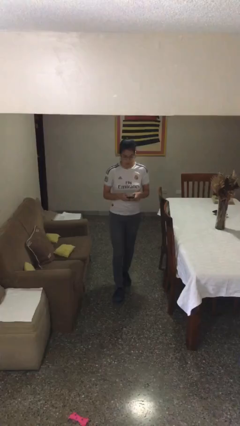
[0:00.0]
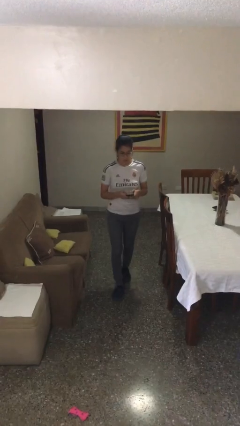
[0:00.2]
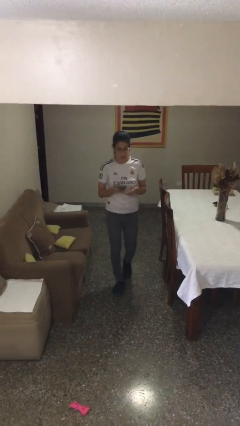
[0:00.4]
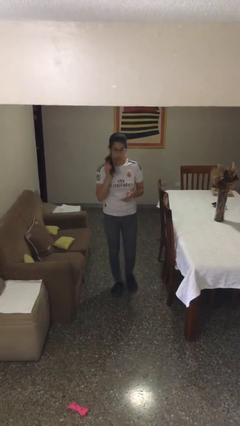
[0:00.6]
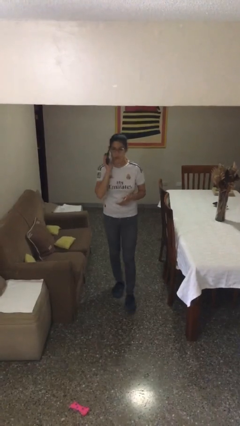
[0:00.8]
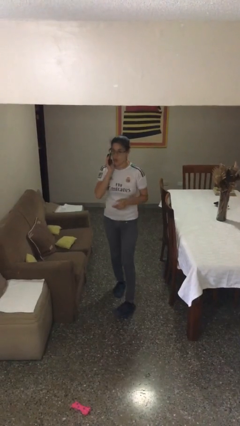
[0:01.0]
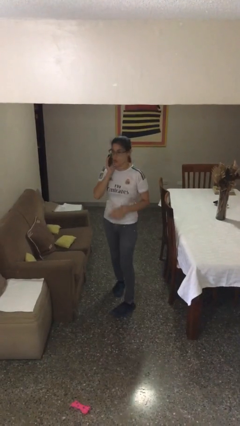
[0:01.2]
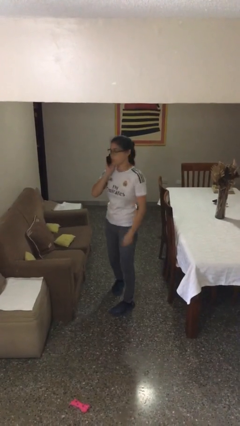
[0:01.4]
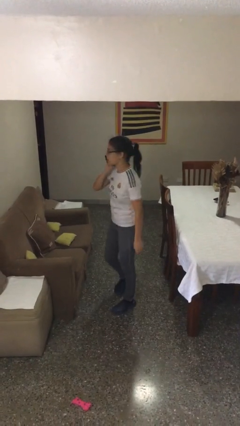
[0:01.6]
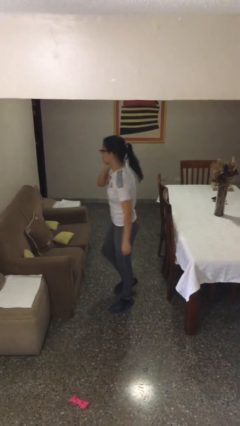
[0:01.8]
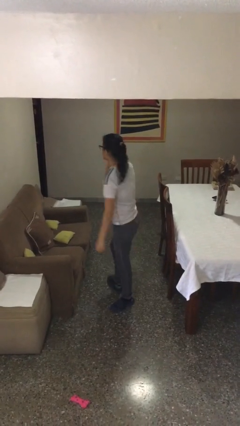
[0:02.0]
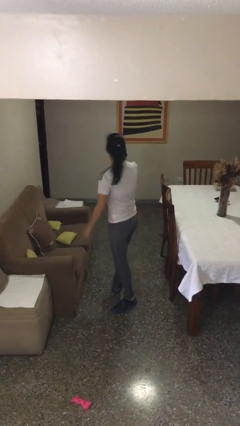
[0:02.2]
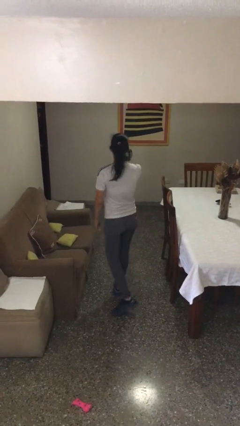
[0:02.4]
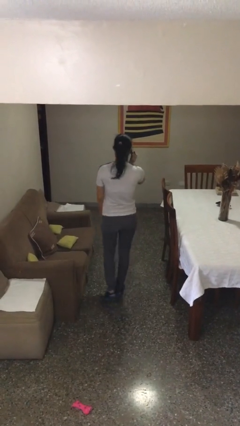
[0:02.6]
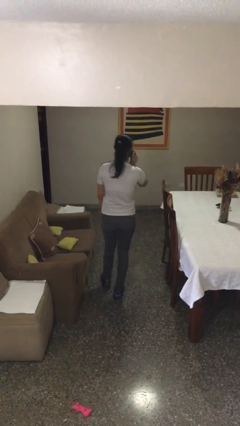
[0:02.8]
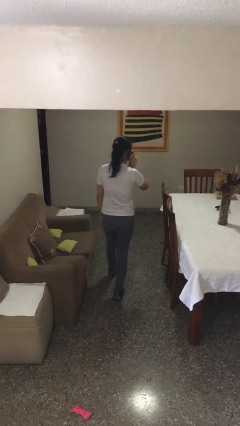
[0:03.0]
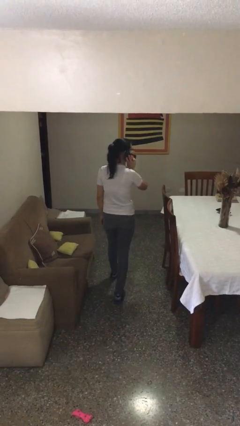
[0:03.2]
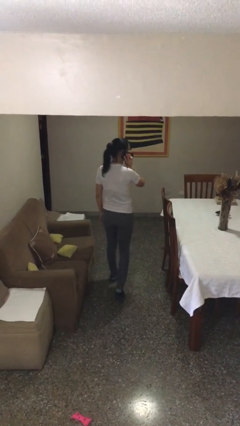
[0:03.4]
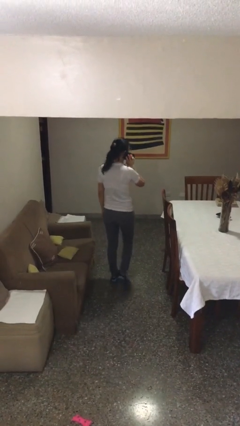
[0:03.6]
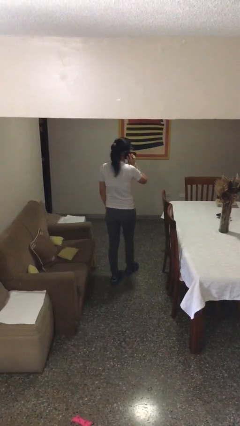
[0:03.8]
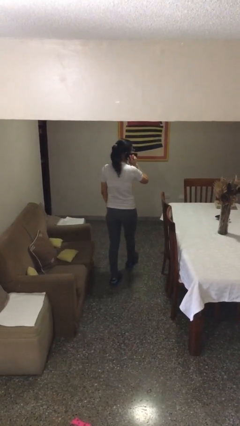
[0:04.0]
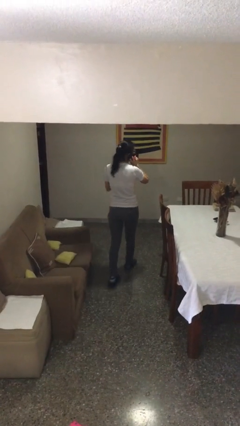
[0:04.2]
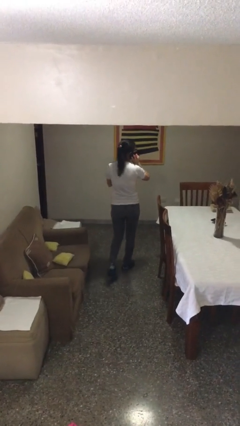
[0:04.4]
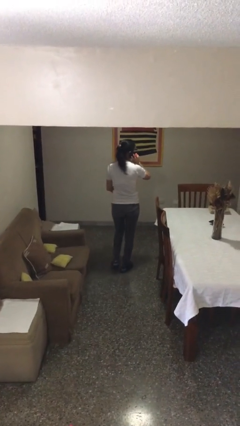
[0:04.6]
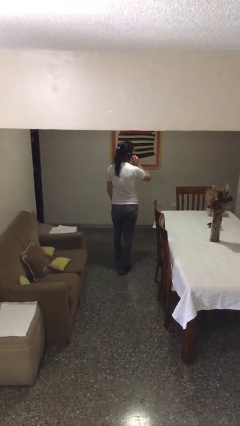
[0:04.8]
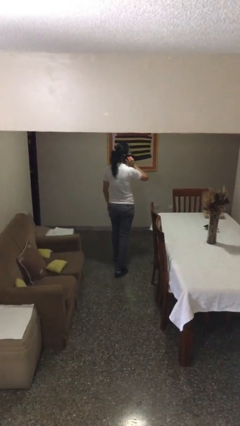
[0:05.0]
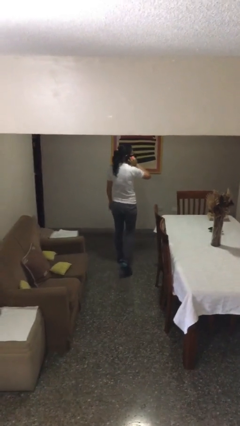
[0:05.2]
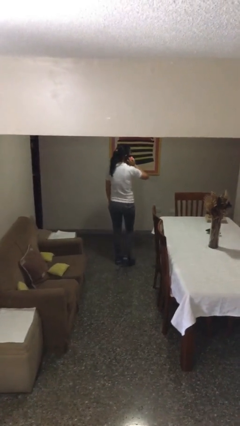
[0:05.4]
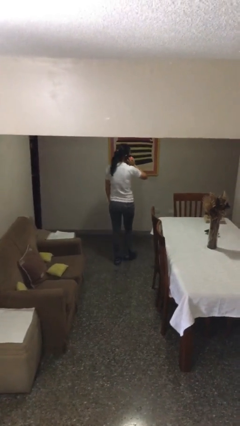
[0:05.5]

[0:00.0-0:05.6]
person talks on phone

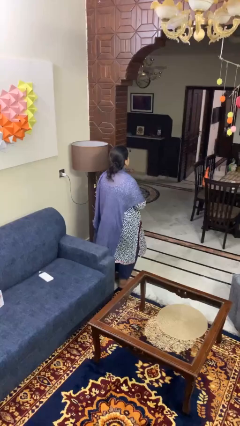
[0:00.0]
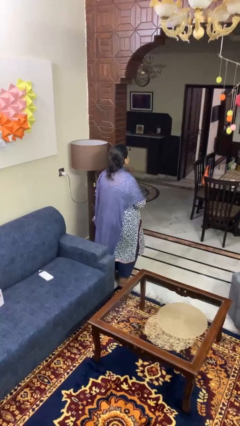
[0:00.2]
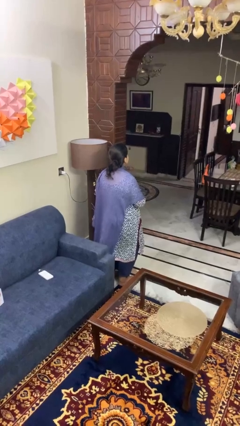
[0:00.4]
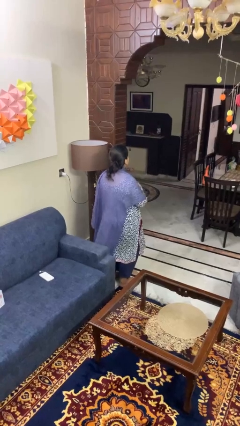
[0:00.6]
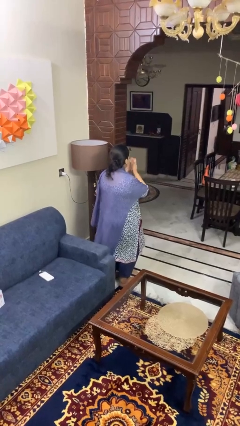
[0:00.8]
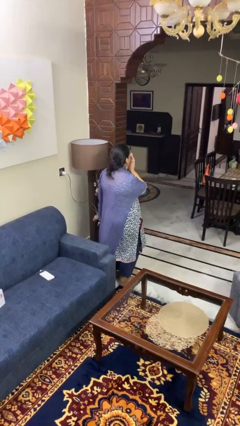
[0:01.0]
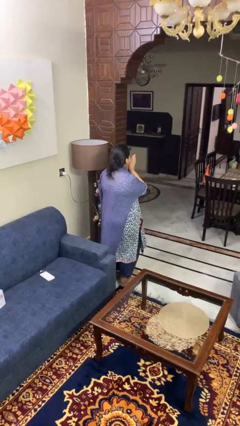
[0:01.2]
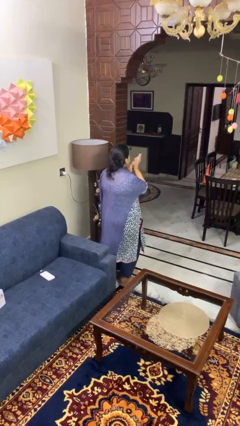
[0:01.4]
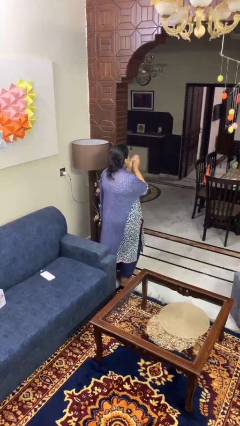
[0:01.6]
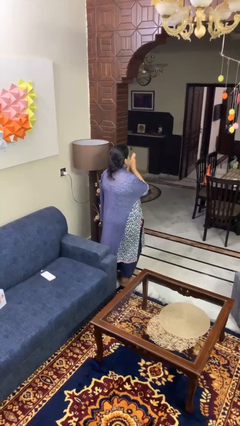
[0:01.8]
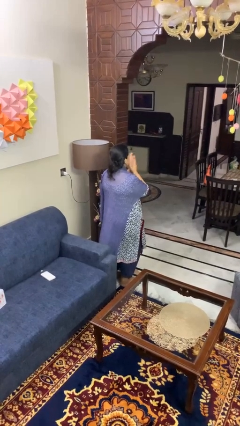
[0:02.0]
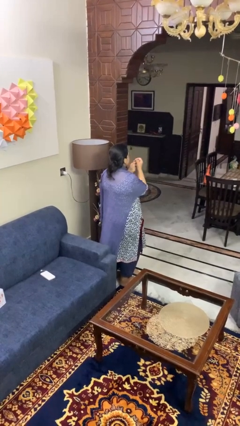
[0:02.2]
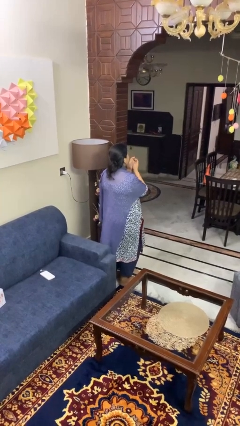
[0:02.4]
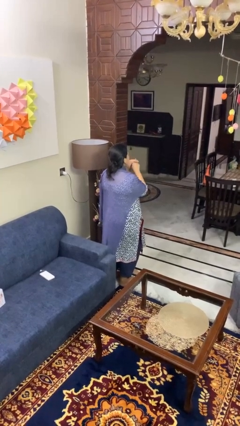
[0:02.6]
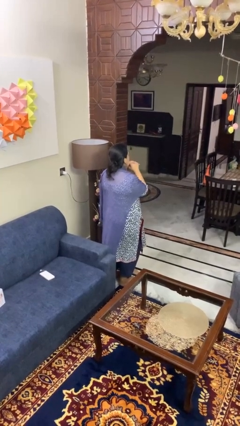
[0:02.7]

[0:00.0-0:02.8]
person blows into hands

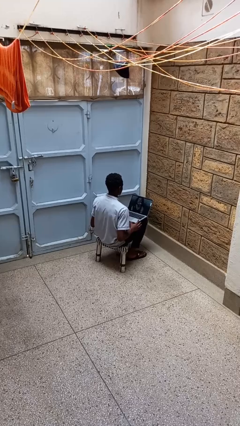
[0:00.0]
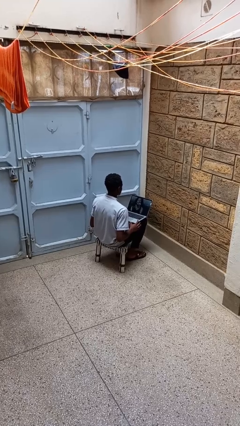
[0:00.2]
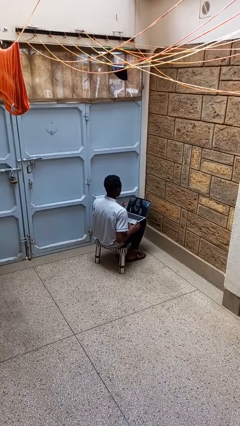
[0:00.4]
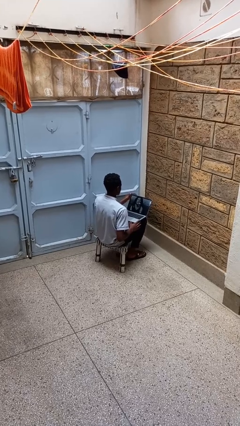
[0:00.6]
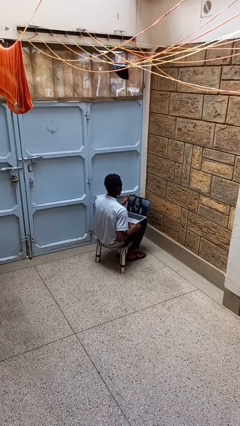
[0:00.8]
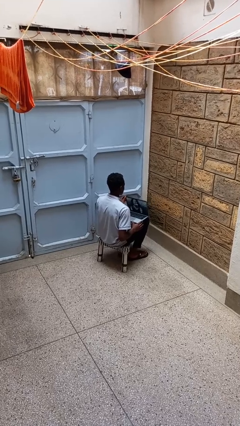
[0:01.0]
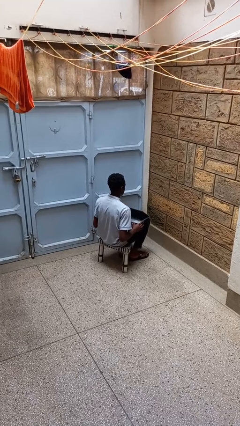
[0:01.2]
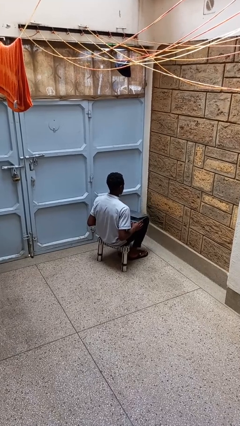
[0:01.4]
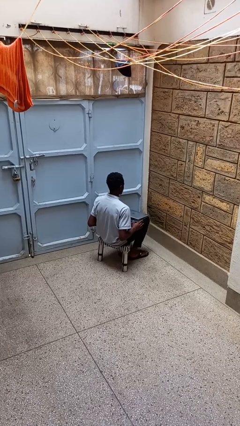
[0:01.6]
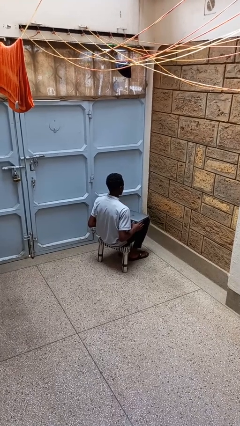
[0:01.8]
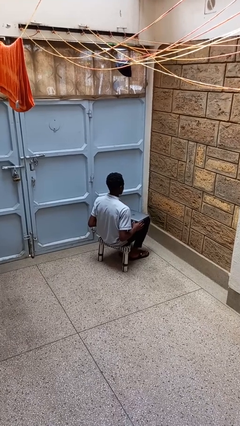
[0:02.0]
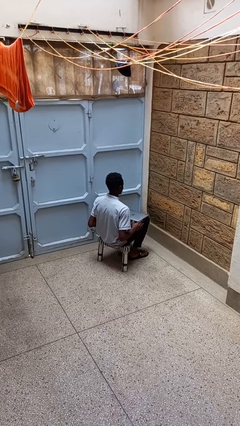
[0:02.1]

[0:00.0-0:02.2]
person closes laptop

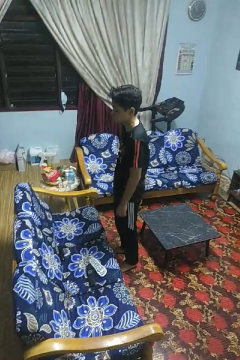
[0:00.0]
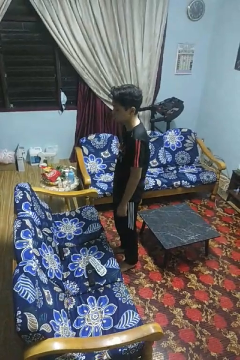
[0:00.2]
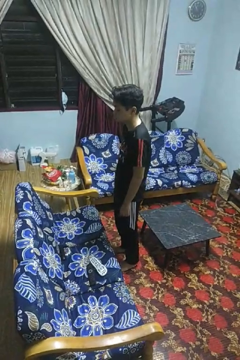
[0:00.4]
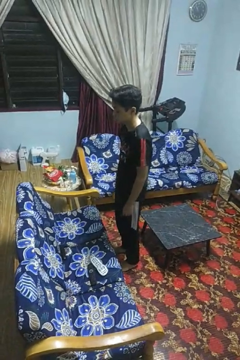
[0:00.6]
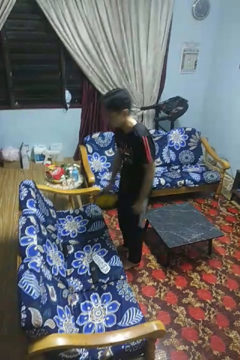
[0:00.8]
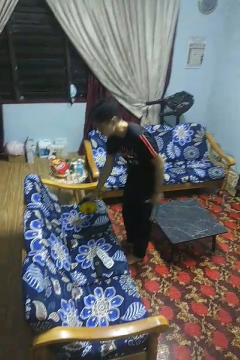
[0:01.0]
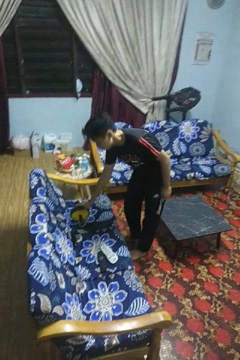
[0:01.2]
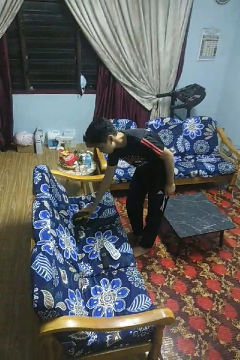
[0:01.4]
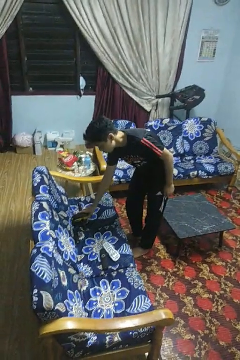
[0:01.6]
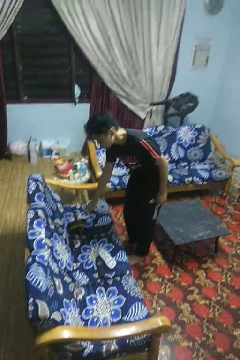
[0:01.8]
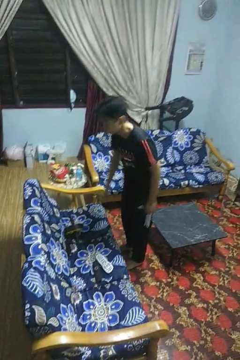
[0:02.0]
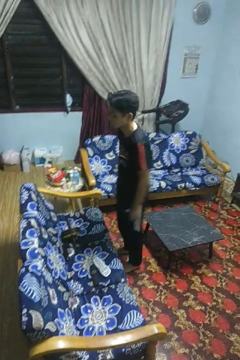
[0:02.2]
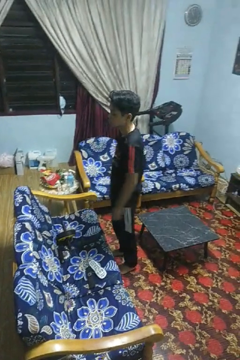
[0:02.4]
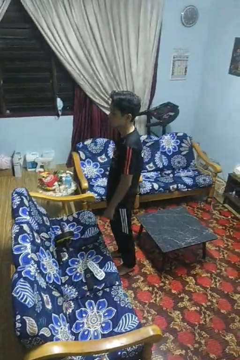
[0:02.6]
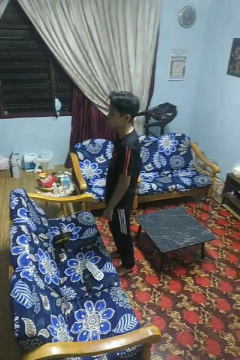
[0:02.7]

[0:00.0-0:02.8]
person puts down object on couch

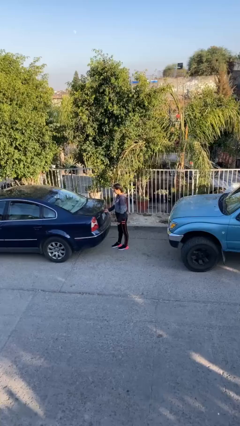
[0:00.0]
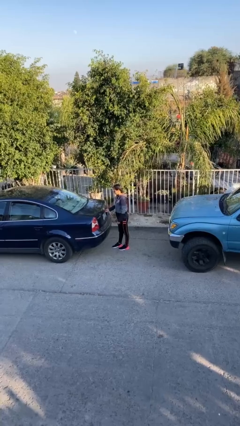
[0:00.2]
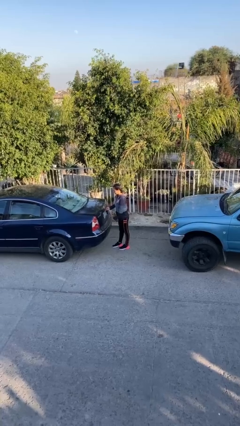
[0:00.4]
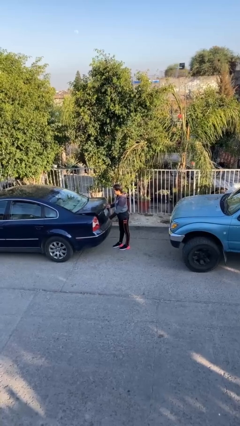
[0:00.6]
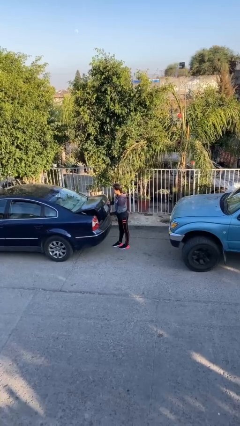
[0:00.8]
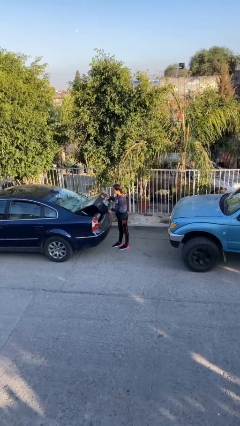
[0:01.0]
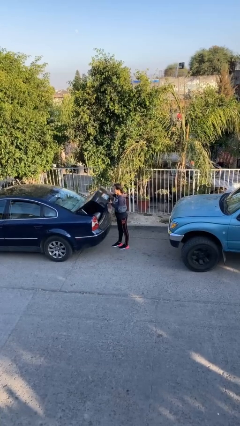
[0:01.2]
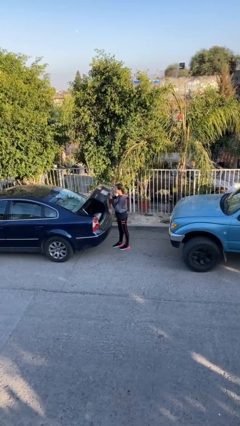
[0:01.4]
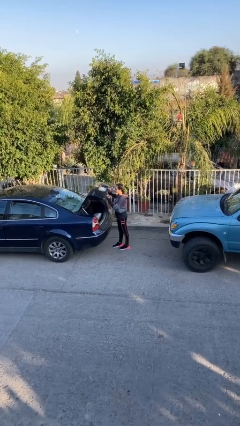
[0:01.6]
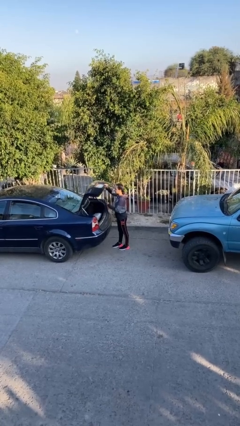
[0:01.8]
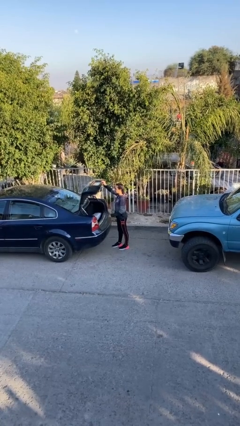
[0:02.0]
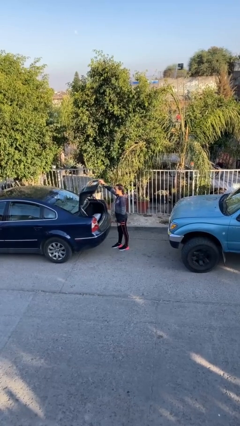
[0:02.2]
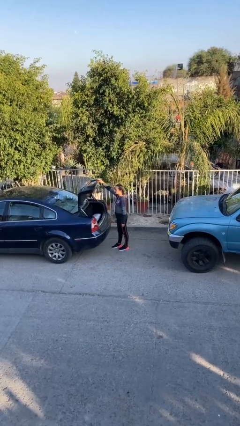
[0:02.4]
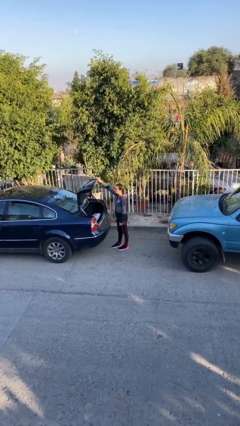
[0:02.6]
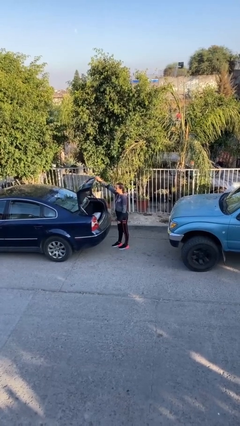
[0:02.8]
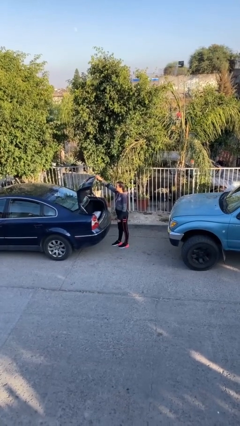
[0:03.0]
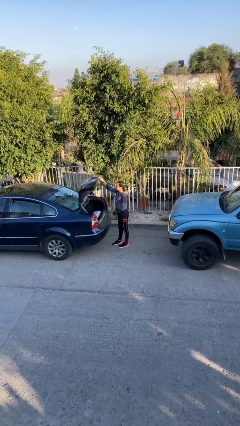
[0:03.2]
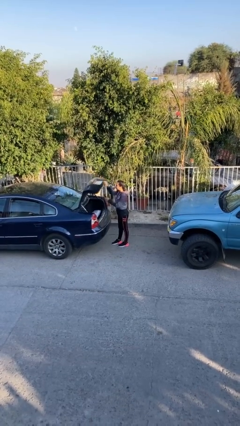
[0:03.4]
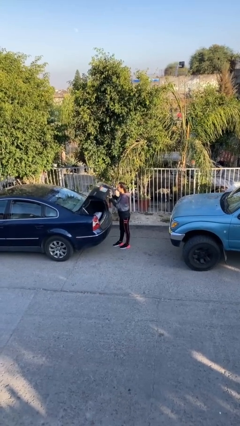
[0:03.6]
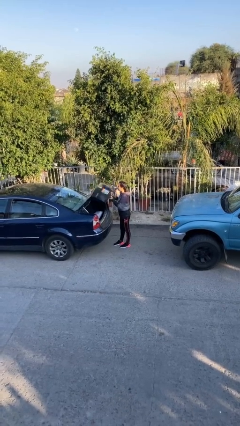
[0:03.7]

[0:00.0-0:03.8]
person opens car trunk

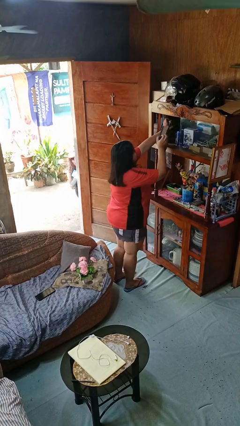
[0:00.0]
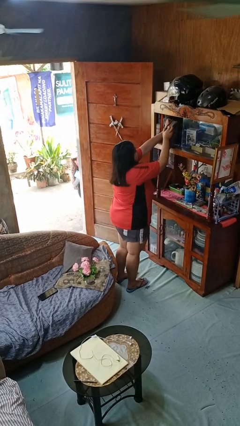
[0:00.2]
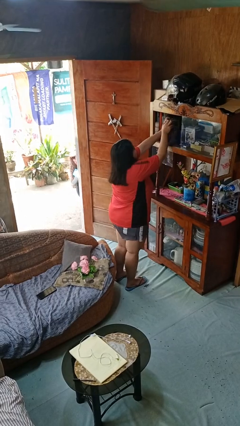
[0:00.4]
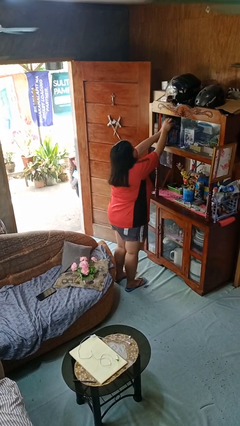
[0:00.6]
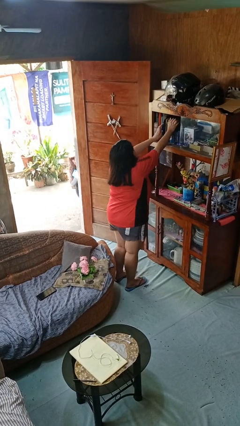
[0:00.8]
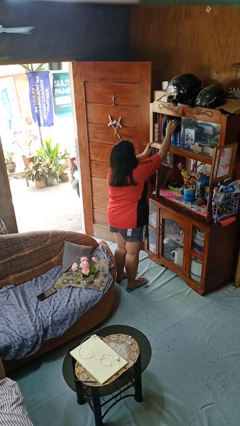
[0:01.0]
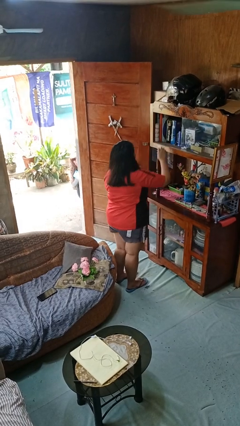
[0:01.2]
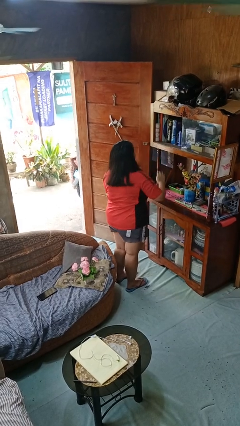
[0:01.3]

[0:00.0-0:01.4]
person puts down object on shelf
